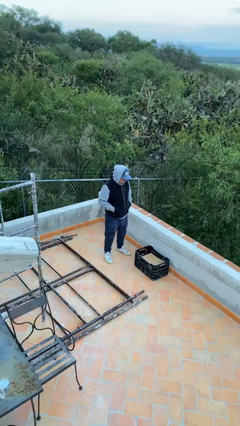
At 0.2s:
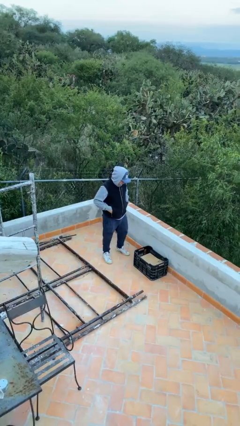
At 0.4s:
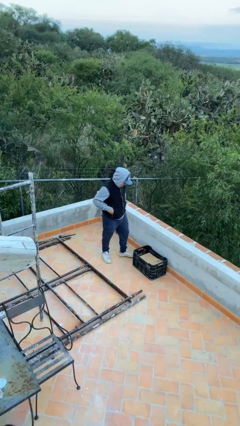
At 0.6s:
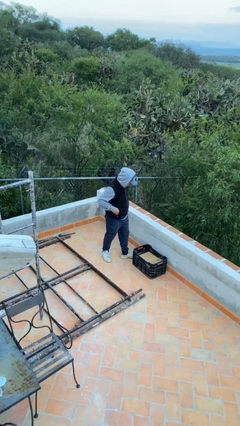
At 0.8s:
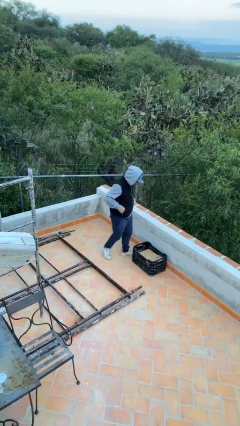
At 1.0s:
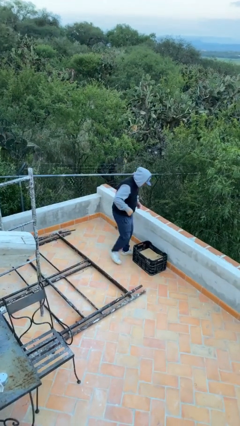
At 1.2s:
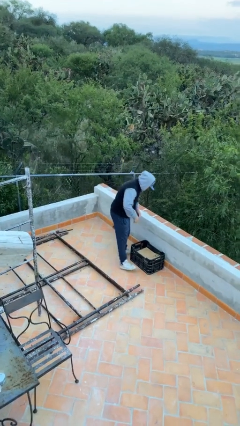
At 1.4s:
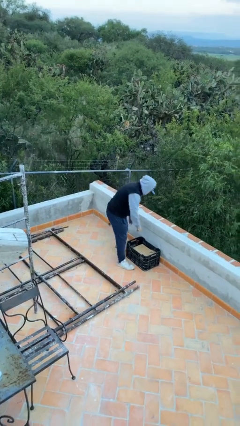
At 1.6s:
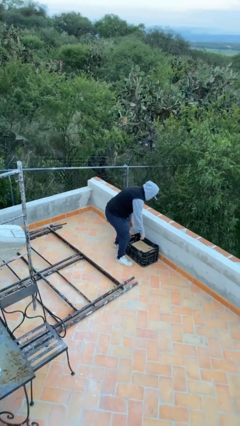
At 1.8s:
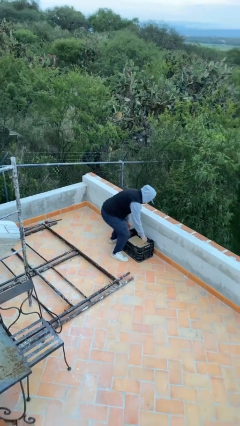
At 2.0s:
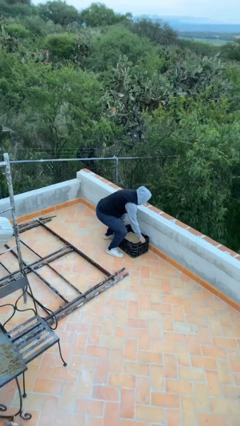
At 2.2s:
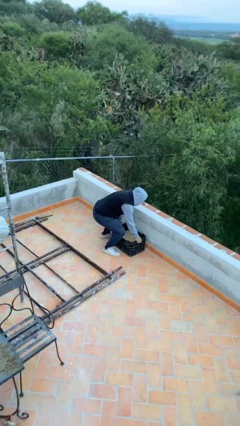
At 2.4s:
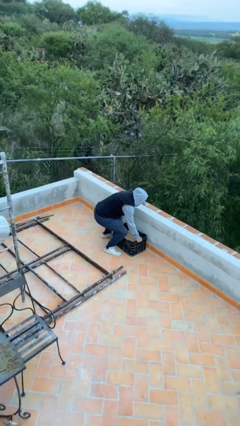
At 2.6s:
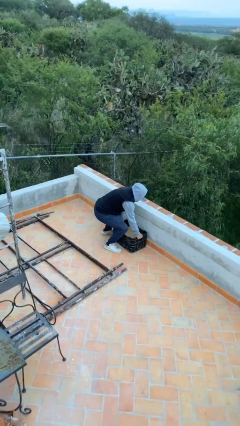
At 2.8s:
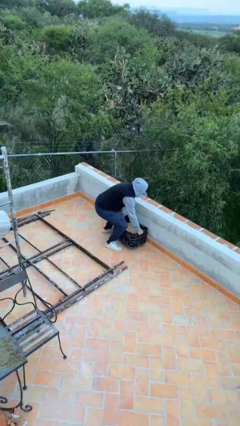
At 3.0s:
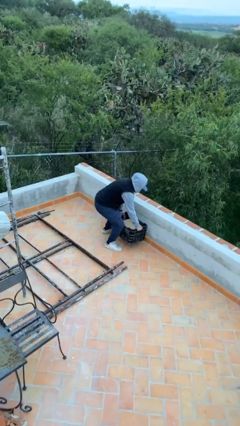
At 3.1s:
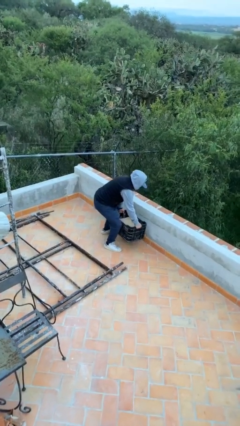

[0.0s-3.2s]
person picks up object from floor

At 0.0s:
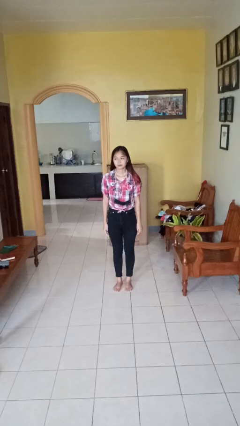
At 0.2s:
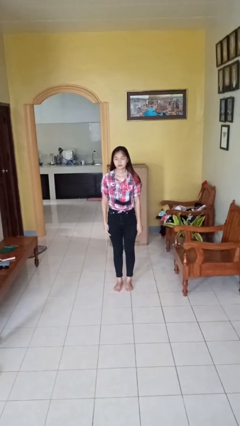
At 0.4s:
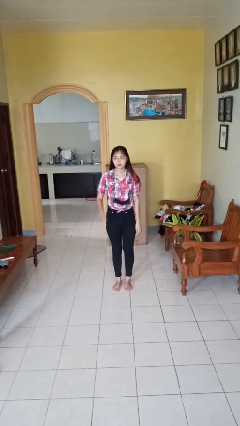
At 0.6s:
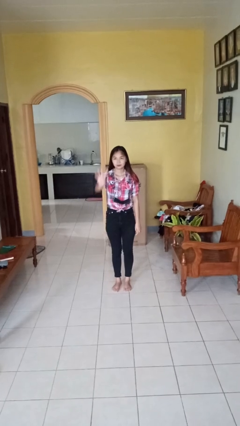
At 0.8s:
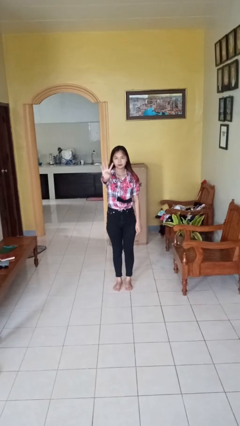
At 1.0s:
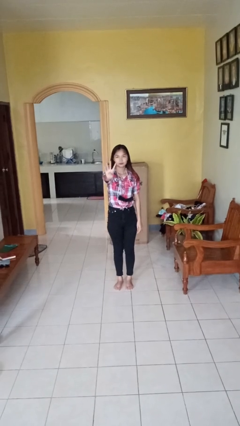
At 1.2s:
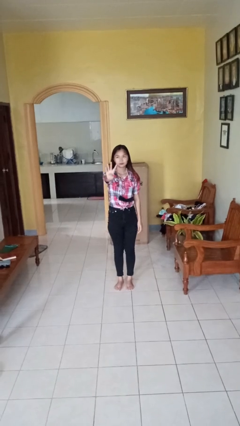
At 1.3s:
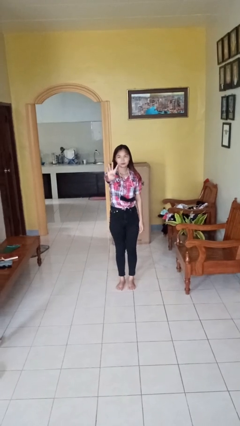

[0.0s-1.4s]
person gestures number four

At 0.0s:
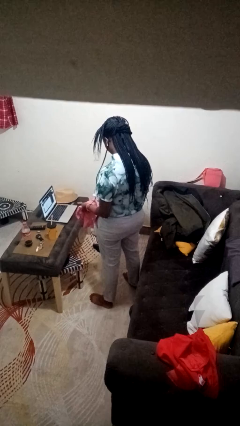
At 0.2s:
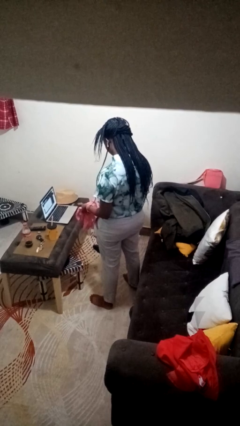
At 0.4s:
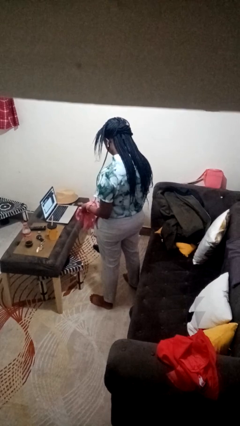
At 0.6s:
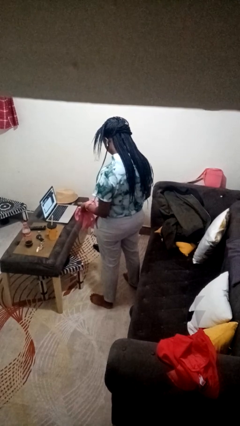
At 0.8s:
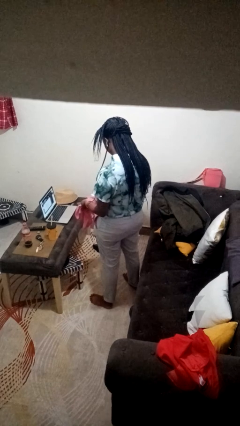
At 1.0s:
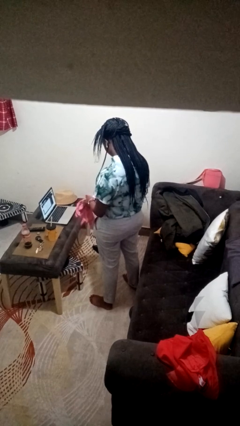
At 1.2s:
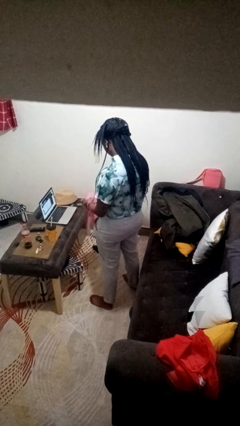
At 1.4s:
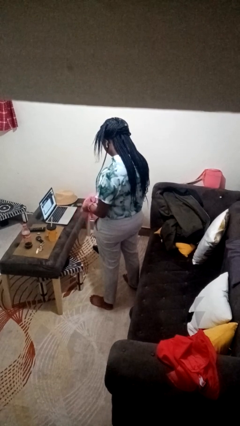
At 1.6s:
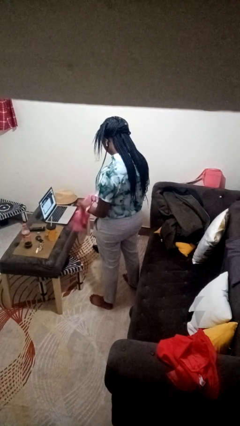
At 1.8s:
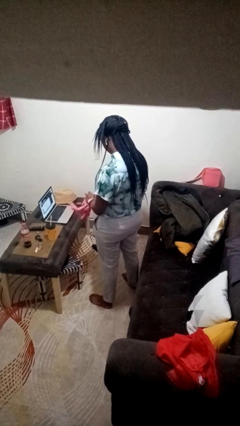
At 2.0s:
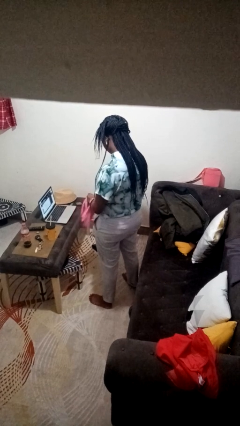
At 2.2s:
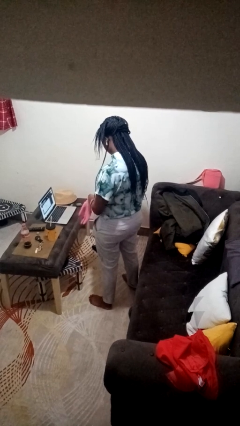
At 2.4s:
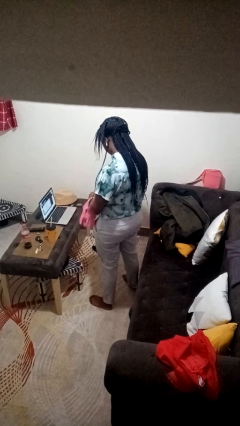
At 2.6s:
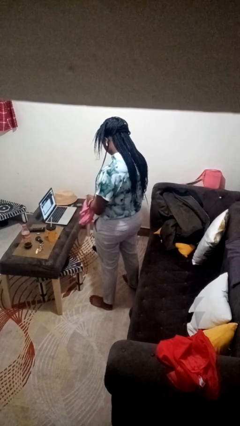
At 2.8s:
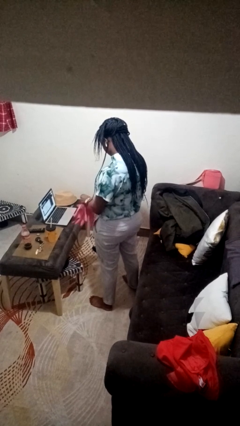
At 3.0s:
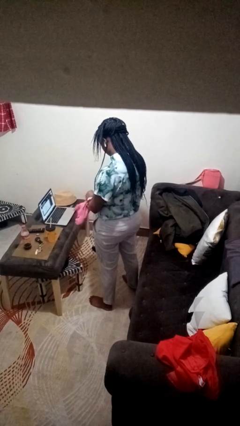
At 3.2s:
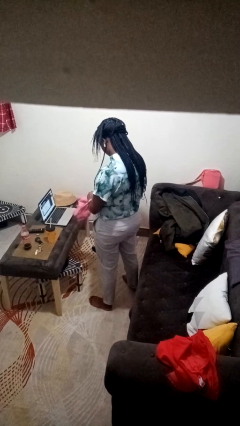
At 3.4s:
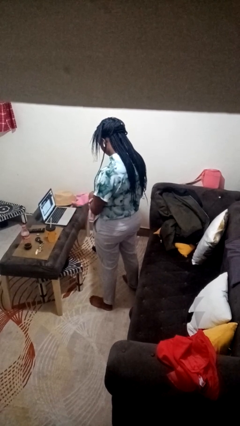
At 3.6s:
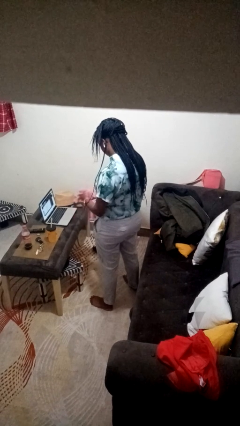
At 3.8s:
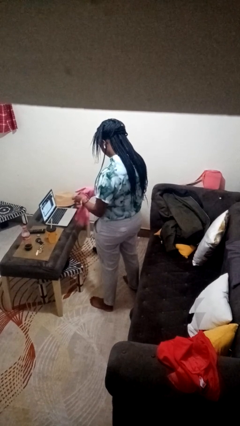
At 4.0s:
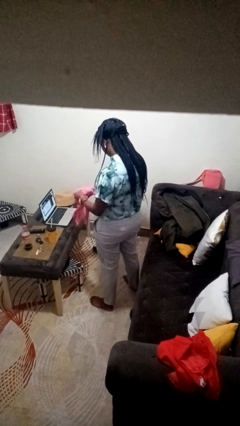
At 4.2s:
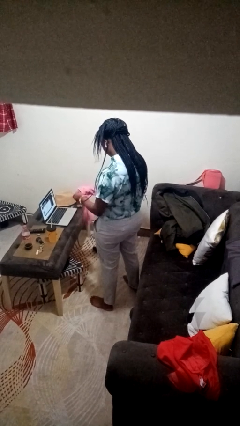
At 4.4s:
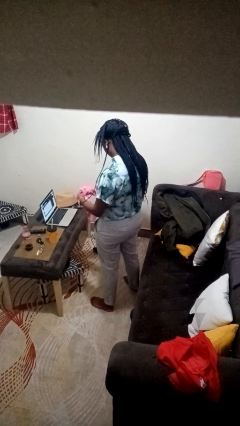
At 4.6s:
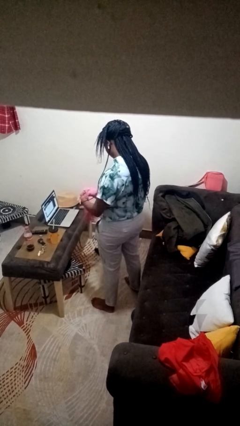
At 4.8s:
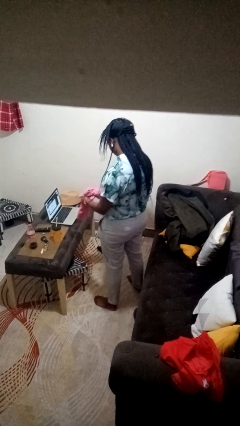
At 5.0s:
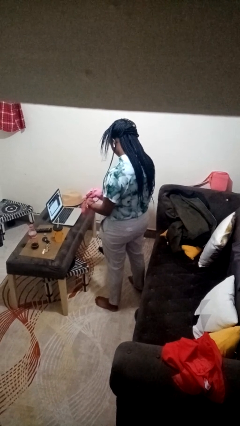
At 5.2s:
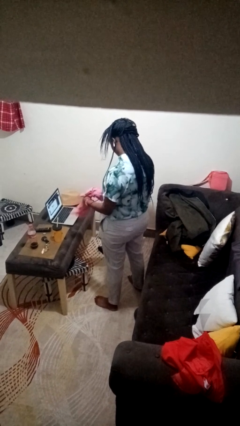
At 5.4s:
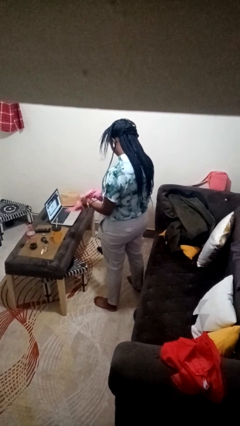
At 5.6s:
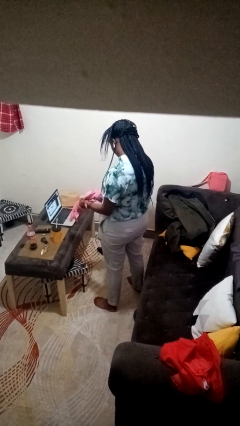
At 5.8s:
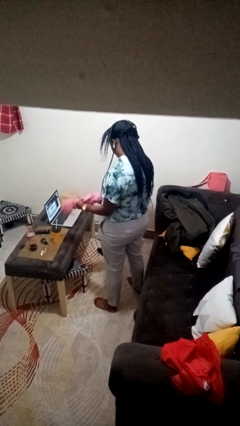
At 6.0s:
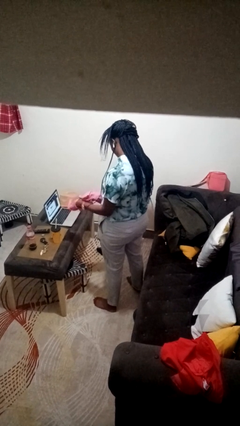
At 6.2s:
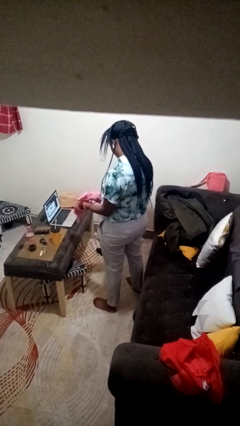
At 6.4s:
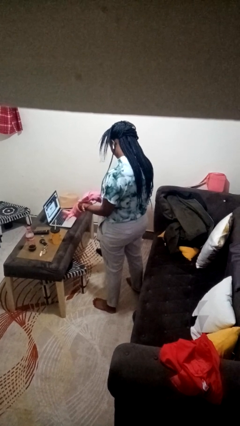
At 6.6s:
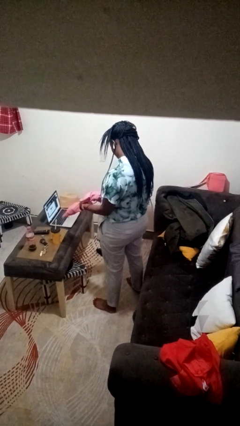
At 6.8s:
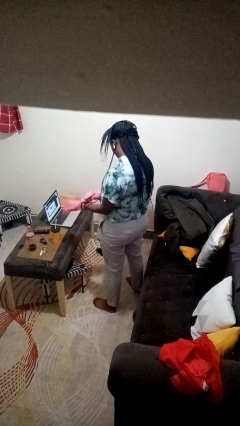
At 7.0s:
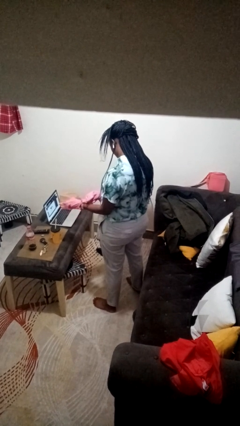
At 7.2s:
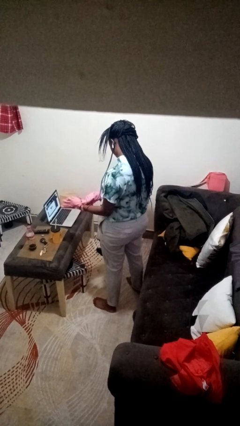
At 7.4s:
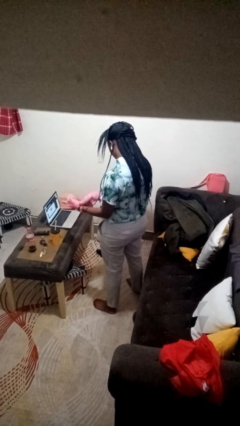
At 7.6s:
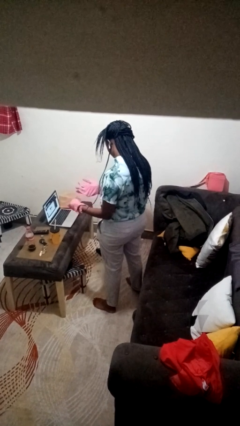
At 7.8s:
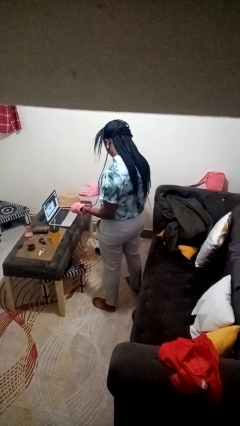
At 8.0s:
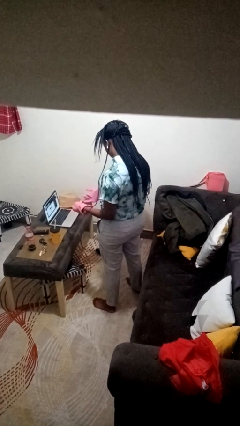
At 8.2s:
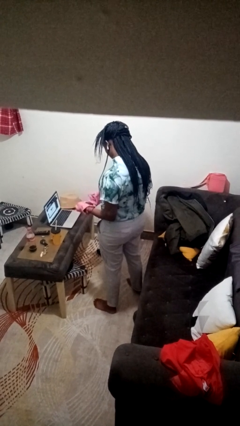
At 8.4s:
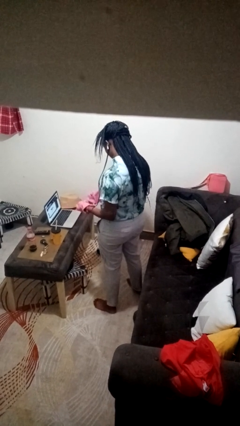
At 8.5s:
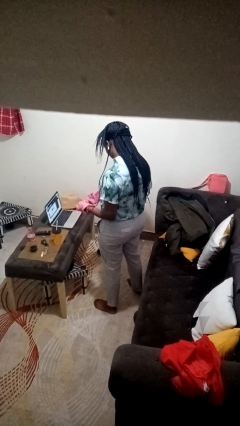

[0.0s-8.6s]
person puts on gloves

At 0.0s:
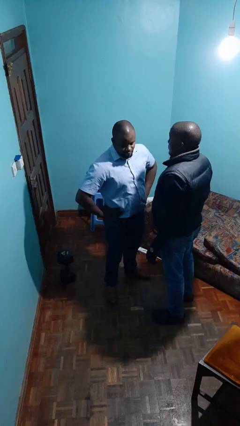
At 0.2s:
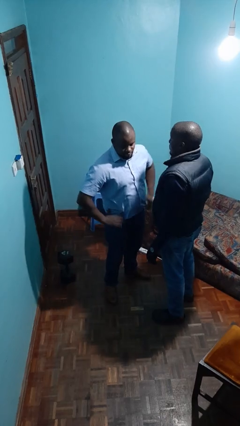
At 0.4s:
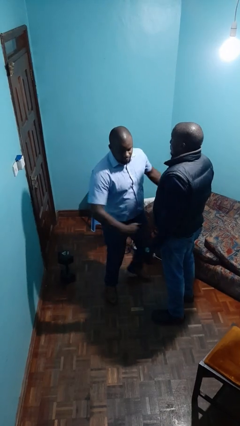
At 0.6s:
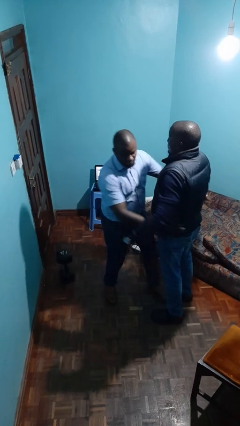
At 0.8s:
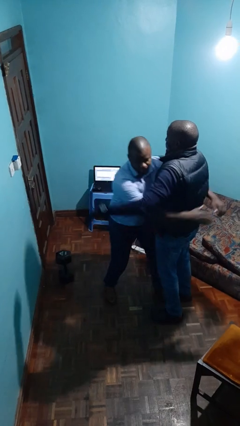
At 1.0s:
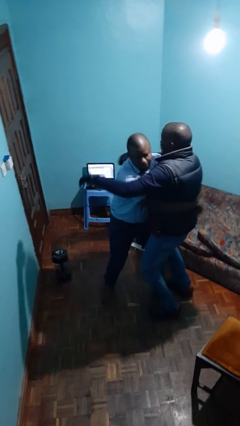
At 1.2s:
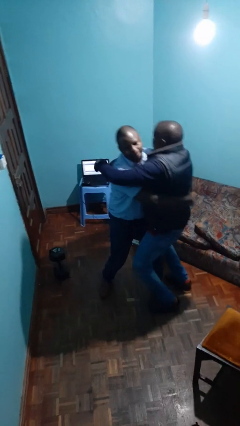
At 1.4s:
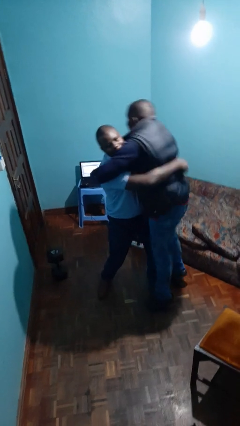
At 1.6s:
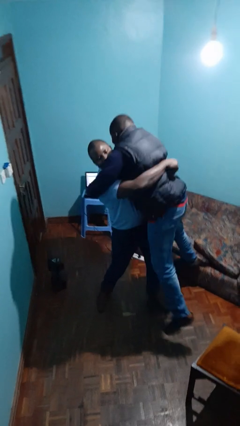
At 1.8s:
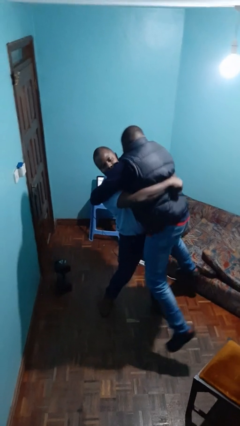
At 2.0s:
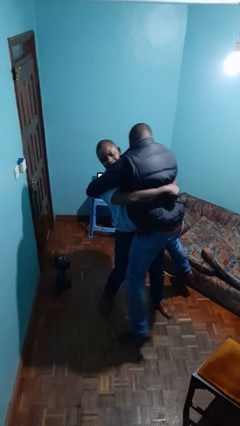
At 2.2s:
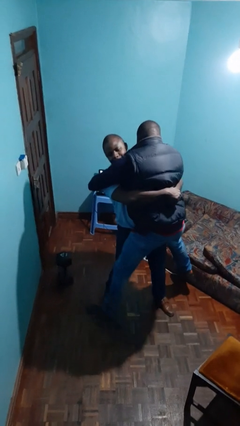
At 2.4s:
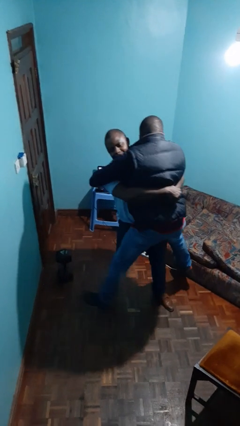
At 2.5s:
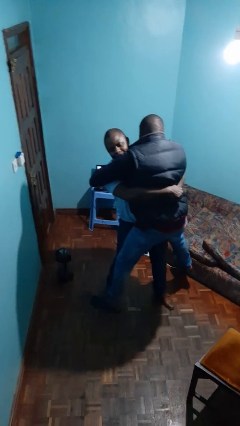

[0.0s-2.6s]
person picks up person

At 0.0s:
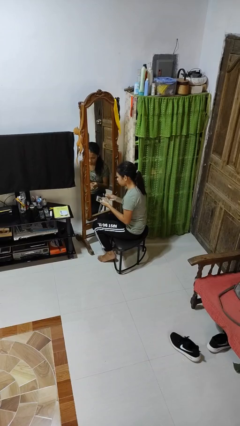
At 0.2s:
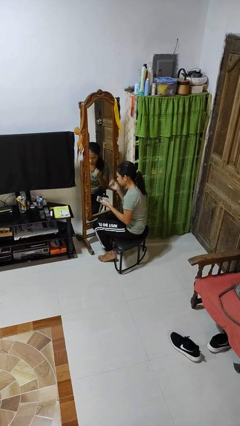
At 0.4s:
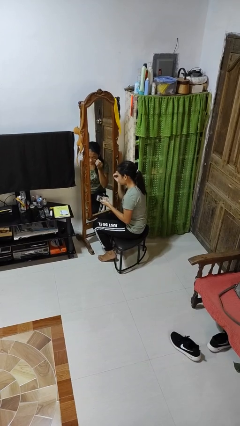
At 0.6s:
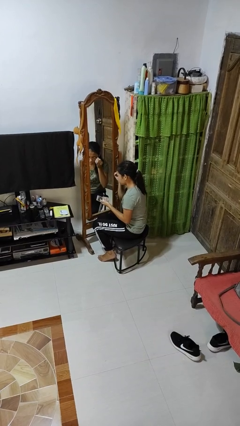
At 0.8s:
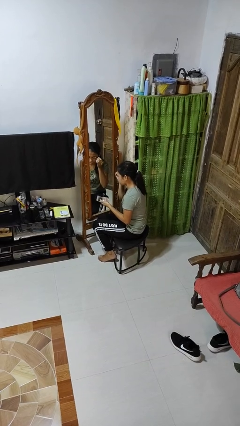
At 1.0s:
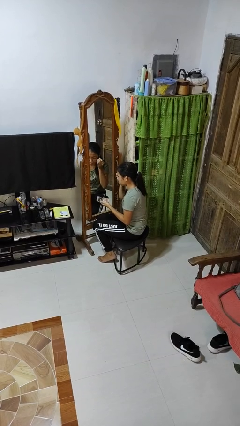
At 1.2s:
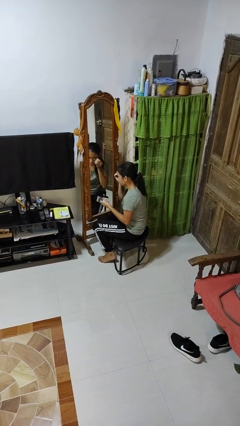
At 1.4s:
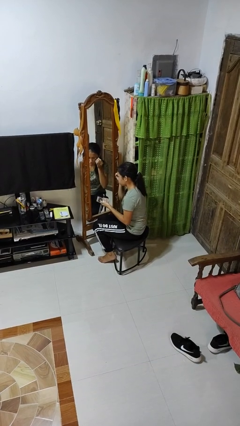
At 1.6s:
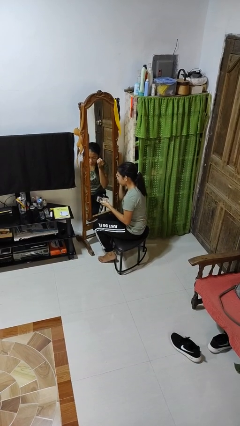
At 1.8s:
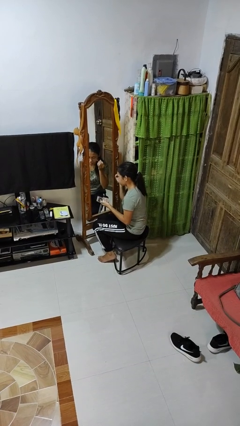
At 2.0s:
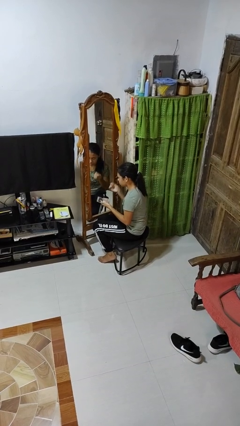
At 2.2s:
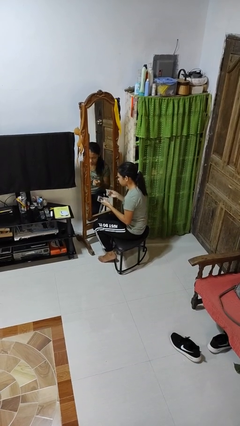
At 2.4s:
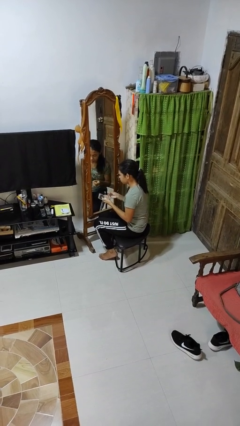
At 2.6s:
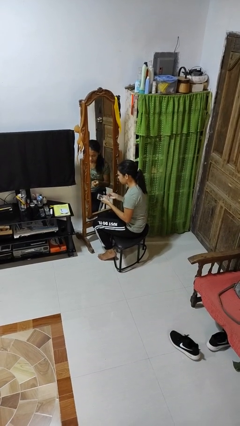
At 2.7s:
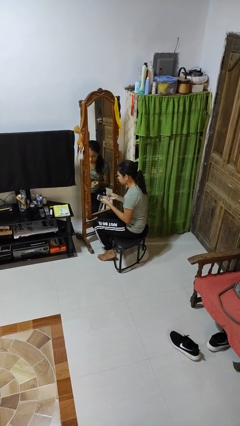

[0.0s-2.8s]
person applies eye makeup
